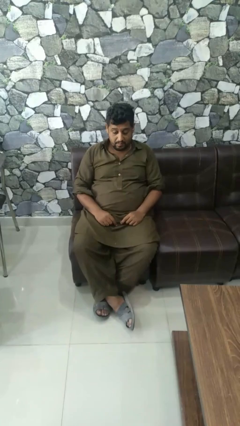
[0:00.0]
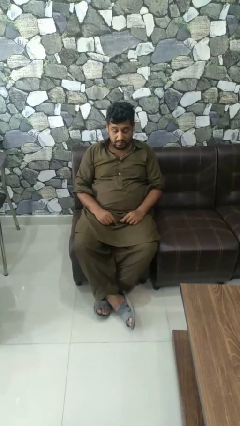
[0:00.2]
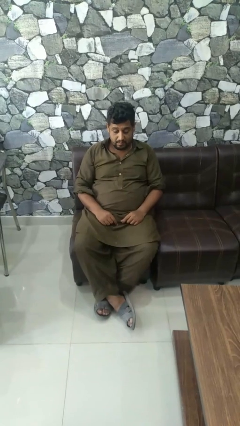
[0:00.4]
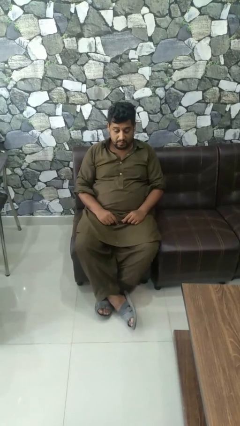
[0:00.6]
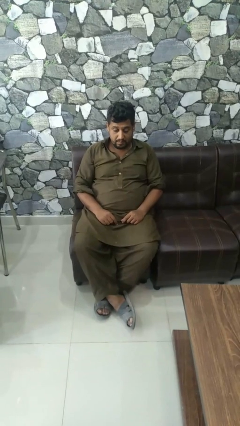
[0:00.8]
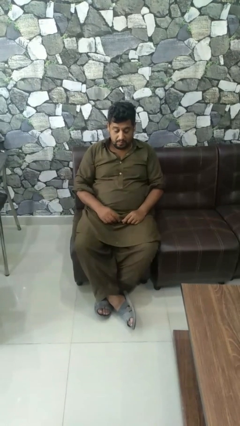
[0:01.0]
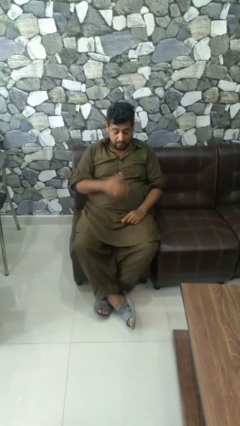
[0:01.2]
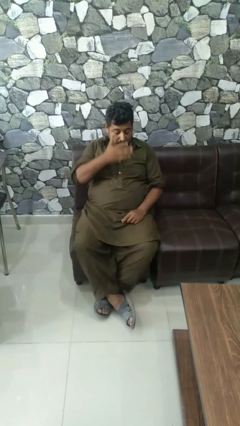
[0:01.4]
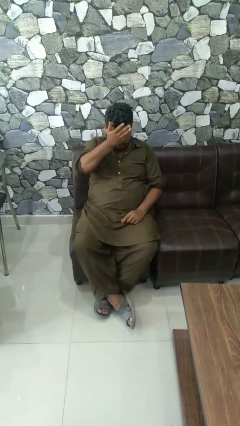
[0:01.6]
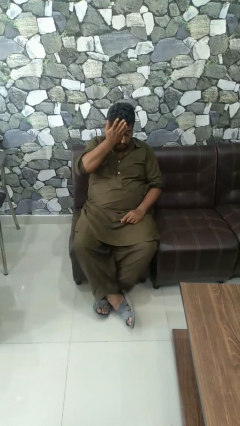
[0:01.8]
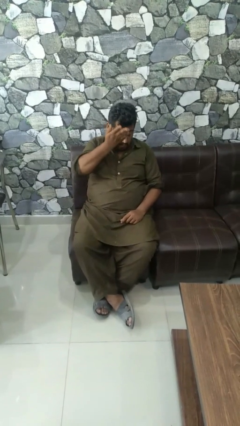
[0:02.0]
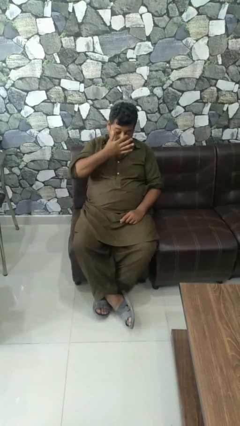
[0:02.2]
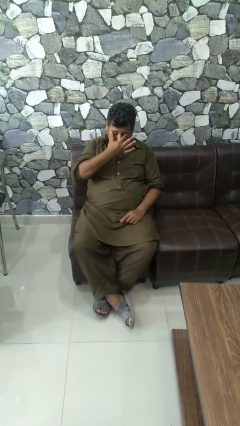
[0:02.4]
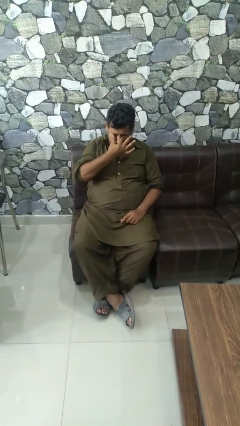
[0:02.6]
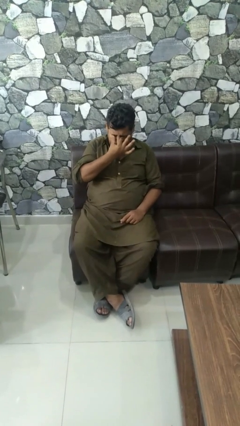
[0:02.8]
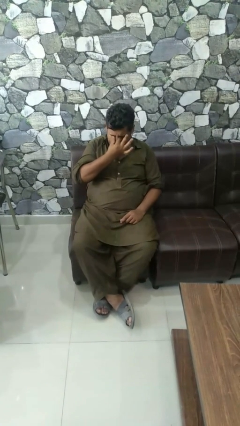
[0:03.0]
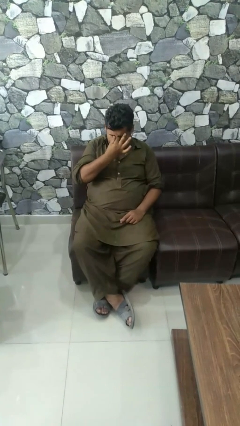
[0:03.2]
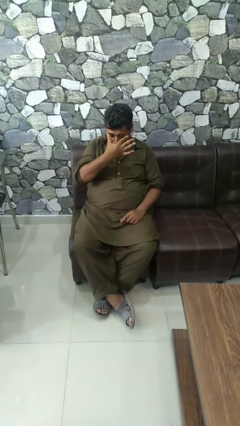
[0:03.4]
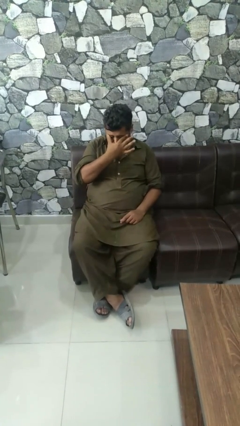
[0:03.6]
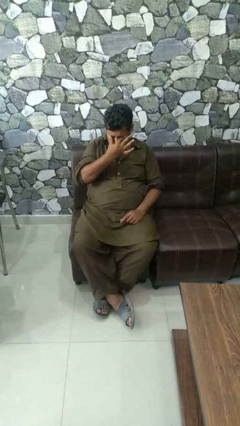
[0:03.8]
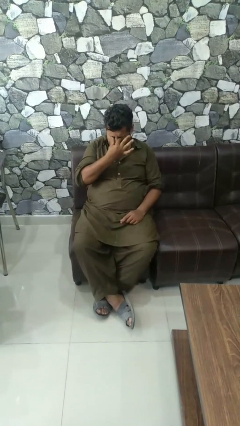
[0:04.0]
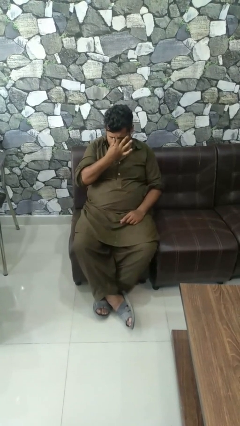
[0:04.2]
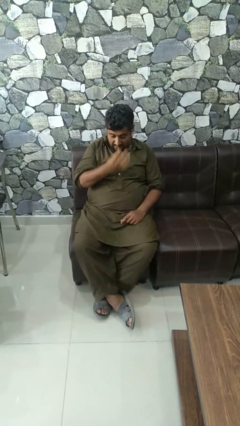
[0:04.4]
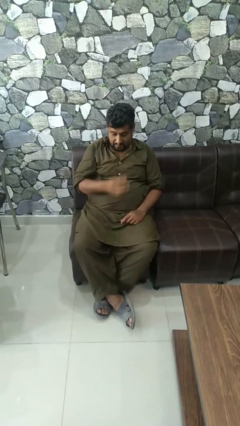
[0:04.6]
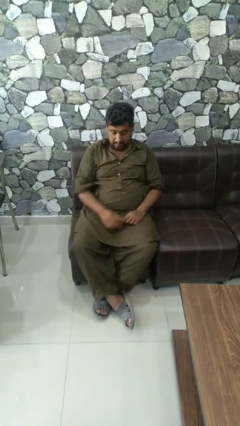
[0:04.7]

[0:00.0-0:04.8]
person rubs eyes

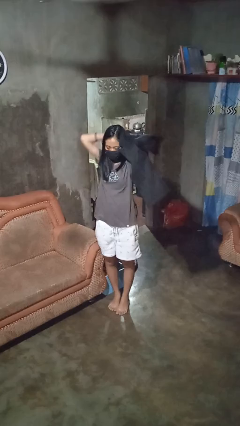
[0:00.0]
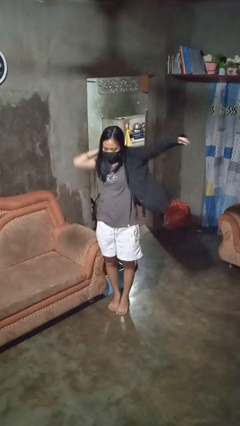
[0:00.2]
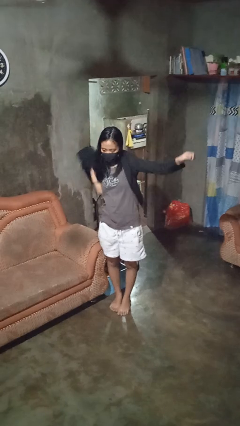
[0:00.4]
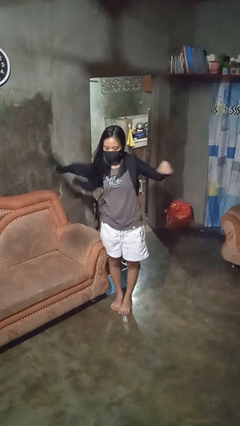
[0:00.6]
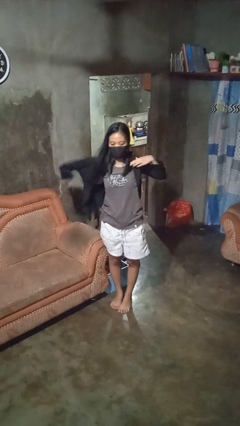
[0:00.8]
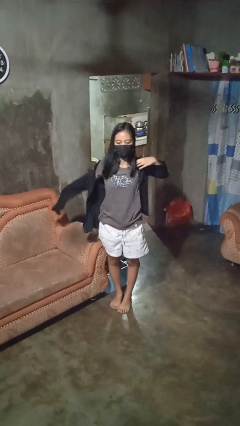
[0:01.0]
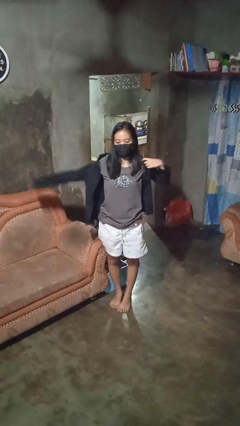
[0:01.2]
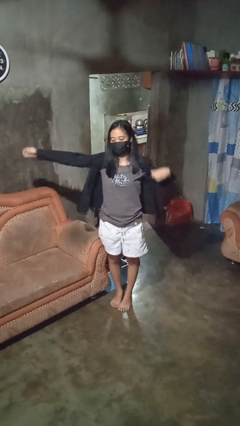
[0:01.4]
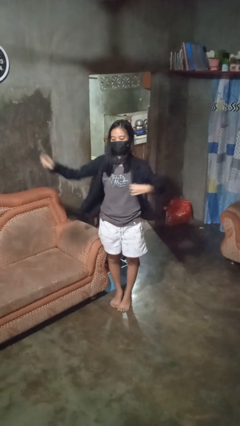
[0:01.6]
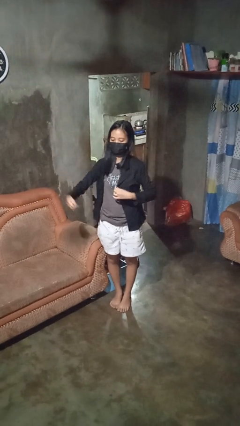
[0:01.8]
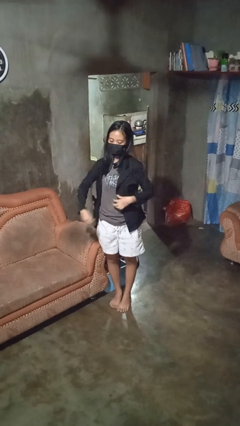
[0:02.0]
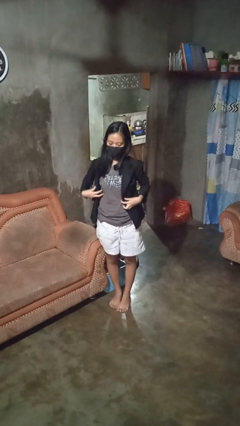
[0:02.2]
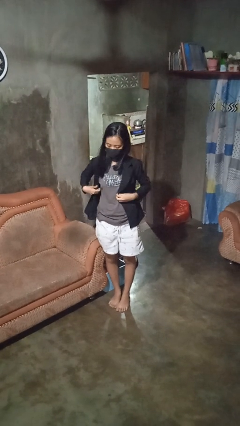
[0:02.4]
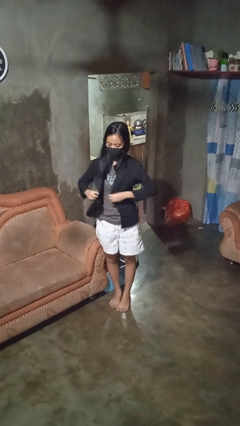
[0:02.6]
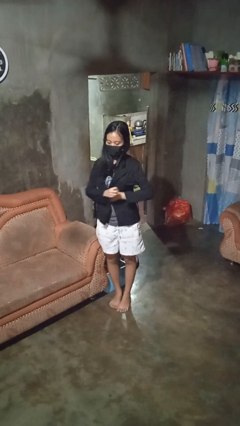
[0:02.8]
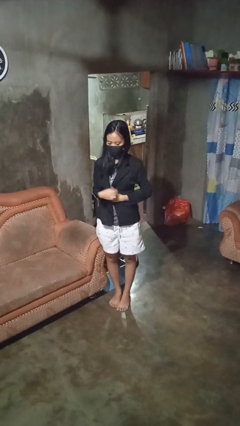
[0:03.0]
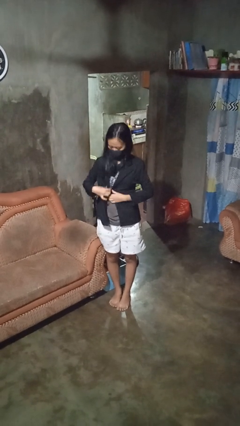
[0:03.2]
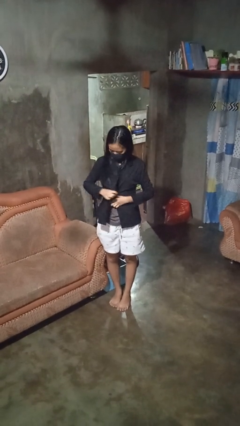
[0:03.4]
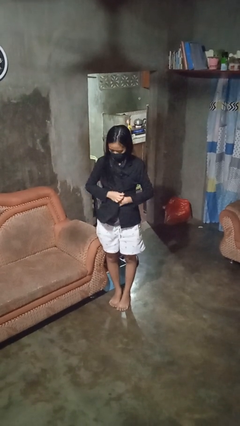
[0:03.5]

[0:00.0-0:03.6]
person puts on shirt

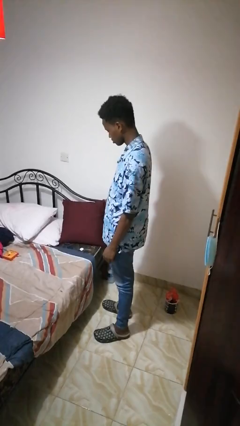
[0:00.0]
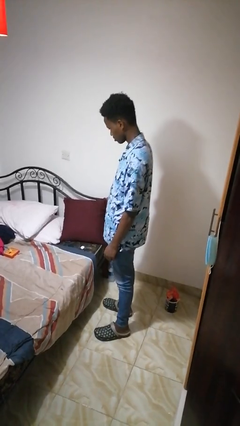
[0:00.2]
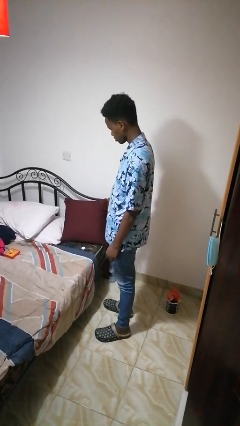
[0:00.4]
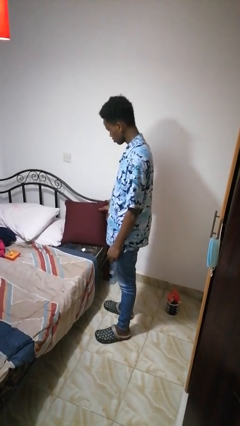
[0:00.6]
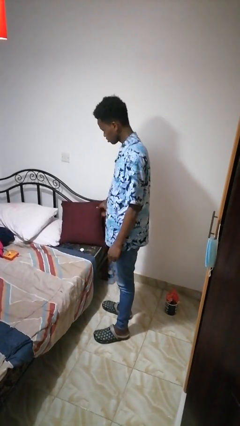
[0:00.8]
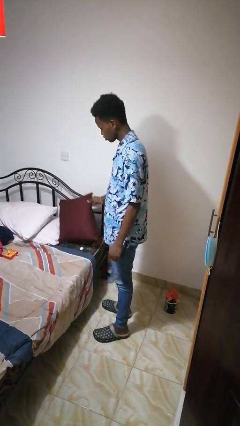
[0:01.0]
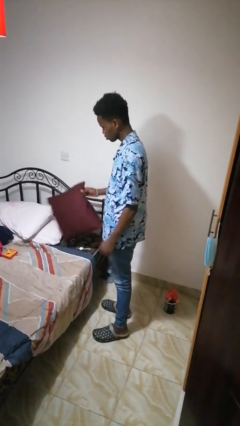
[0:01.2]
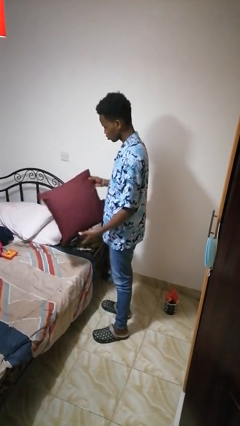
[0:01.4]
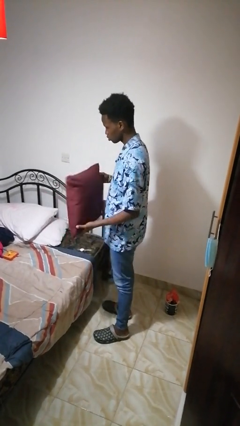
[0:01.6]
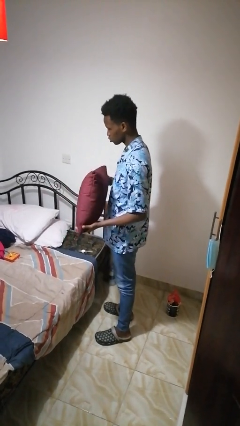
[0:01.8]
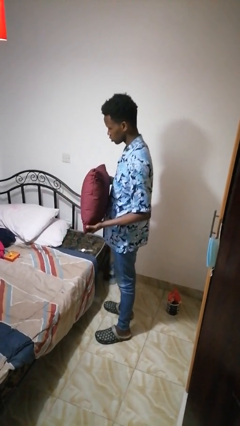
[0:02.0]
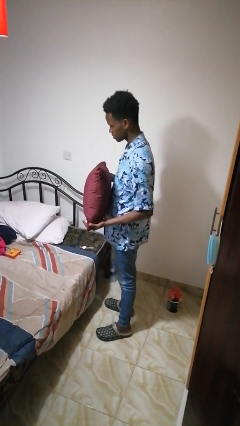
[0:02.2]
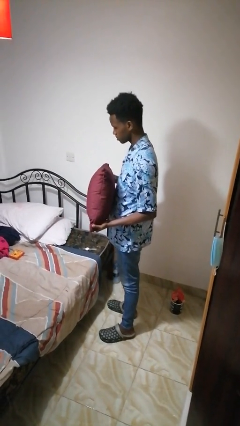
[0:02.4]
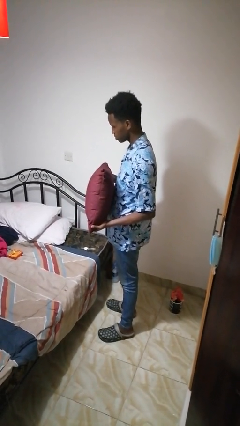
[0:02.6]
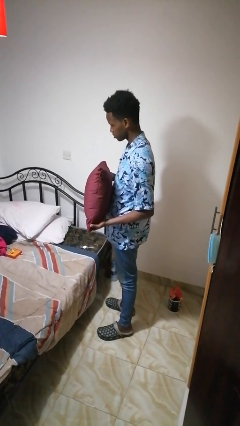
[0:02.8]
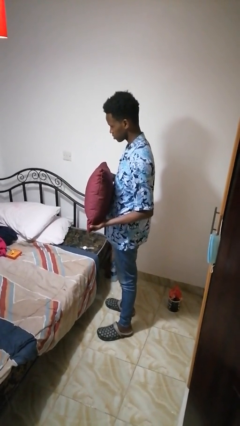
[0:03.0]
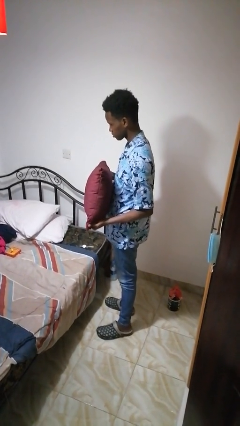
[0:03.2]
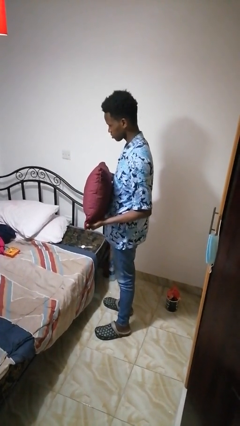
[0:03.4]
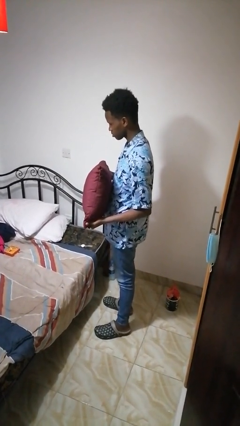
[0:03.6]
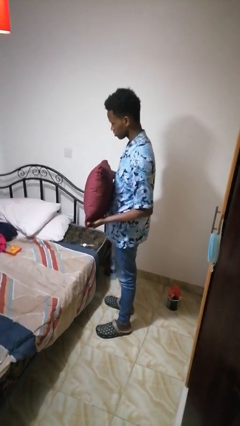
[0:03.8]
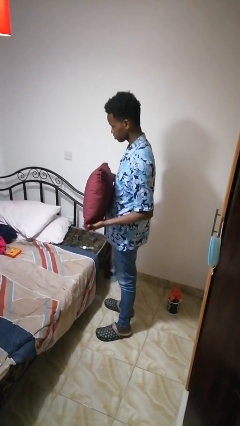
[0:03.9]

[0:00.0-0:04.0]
person picks up object from bed

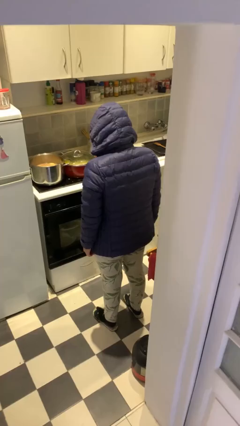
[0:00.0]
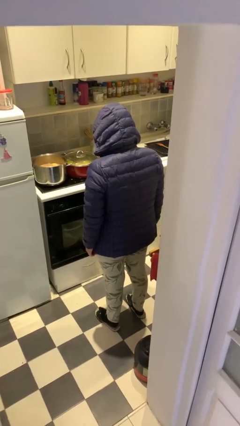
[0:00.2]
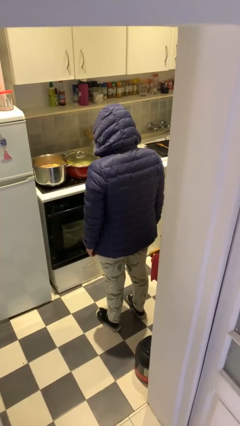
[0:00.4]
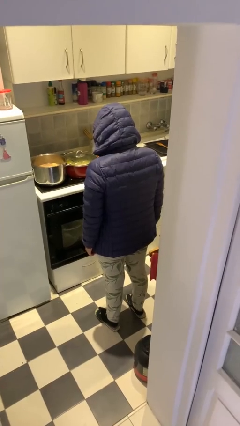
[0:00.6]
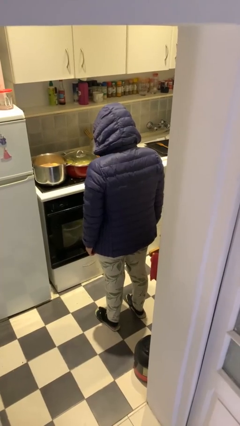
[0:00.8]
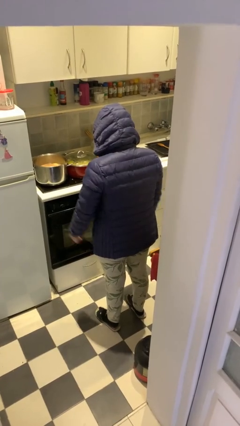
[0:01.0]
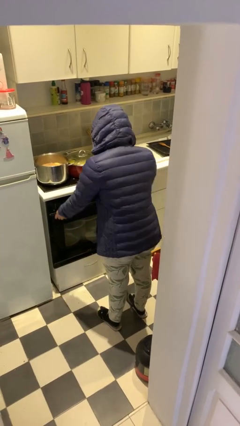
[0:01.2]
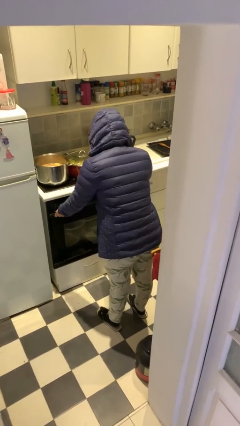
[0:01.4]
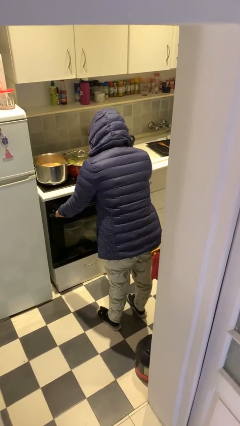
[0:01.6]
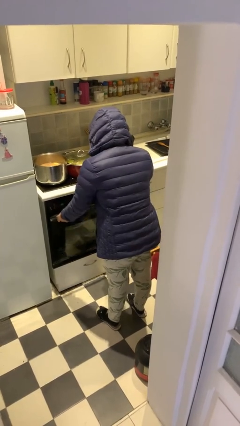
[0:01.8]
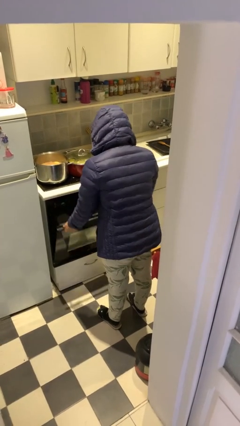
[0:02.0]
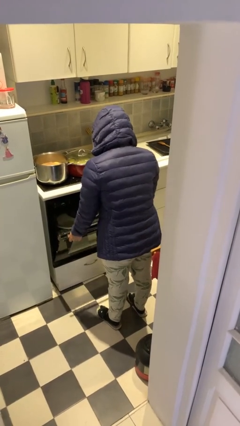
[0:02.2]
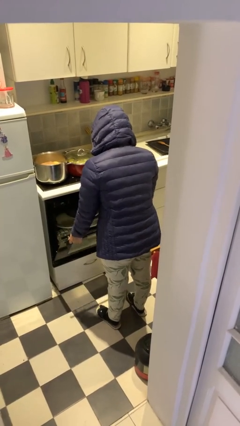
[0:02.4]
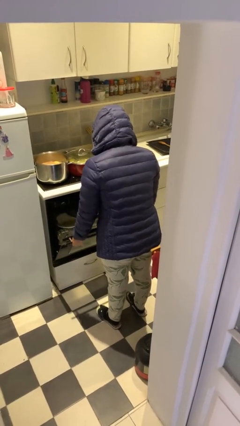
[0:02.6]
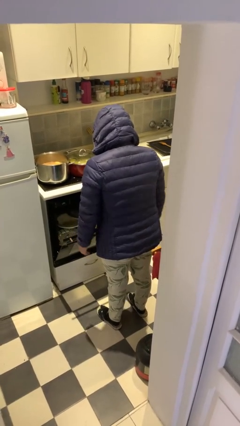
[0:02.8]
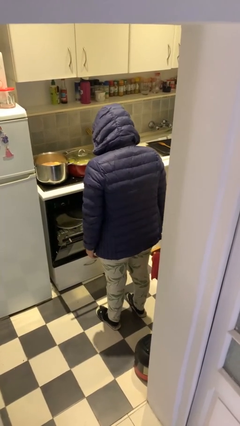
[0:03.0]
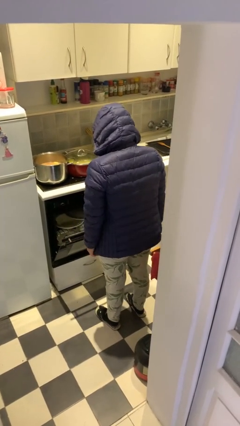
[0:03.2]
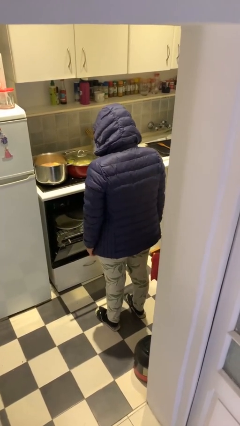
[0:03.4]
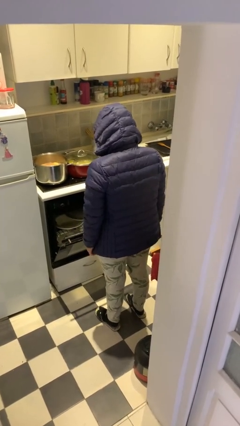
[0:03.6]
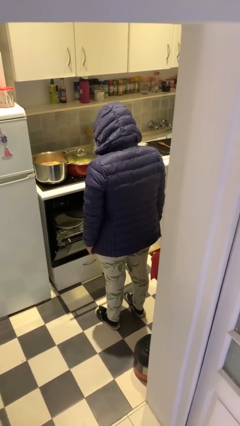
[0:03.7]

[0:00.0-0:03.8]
person opens dishwasher

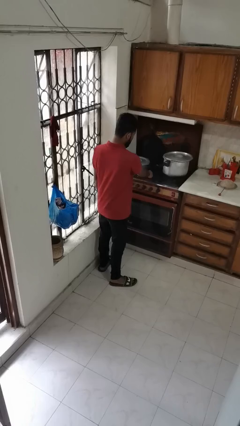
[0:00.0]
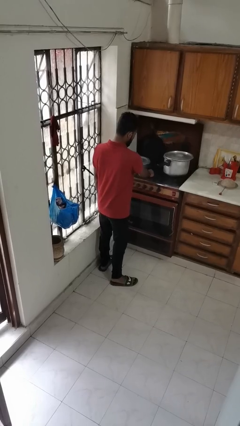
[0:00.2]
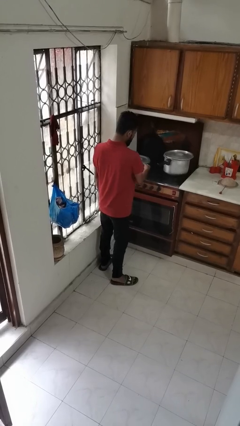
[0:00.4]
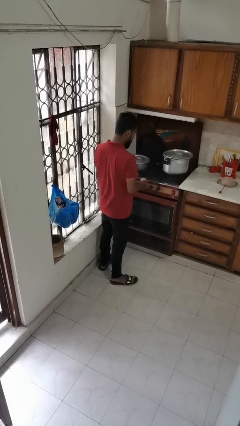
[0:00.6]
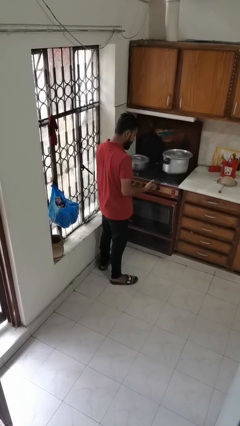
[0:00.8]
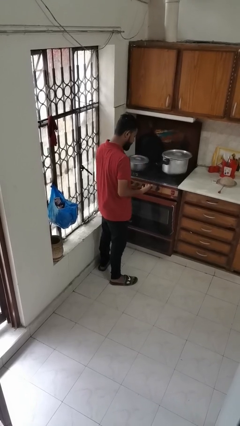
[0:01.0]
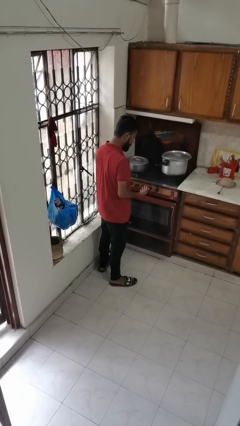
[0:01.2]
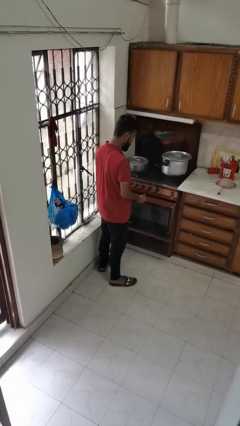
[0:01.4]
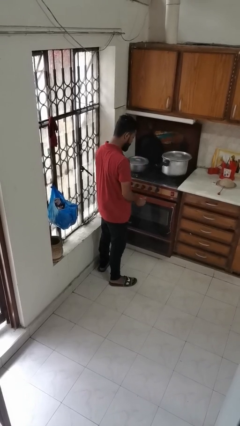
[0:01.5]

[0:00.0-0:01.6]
person burns hand
